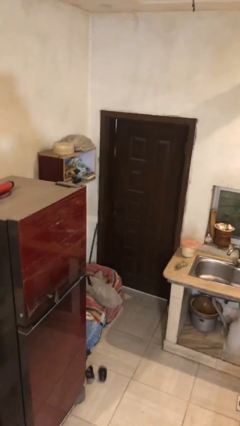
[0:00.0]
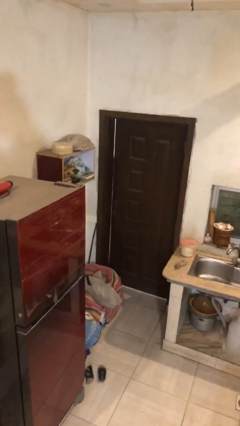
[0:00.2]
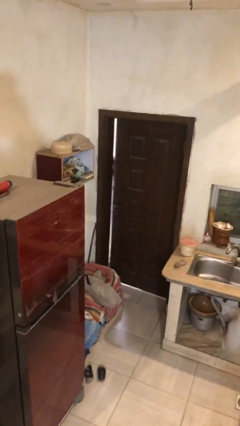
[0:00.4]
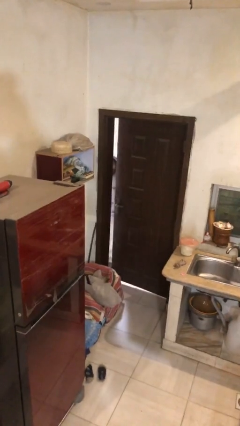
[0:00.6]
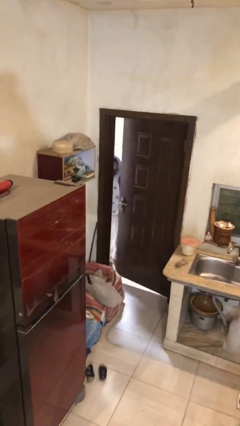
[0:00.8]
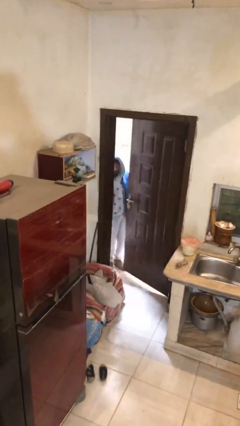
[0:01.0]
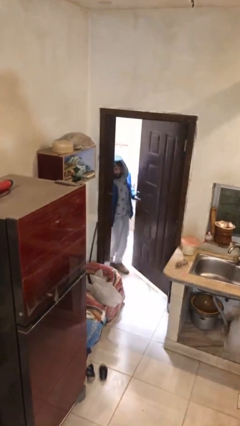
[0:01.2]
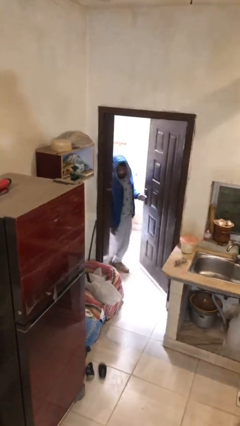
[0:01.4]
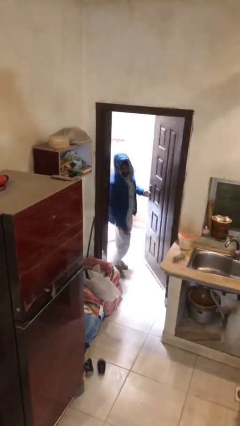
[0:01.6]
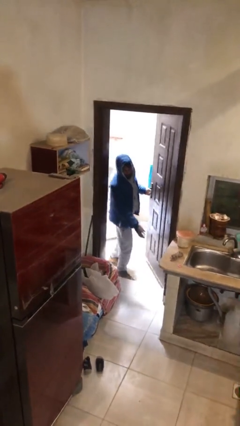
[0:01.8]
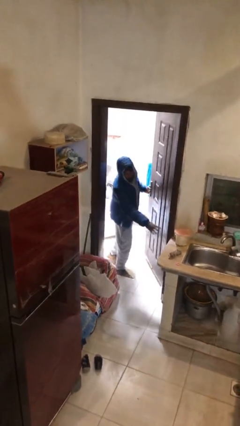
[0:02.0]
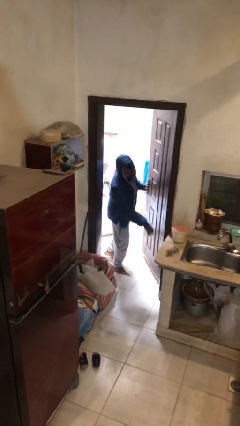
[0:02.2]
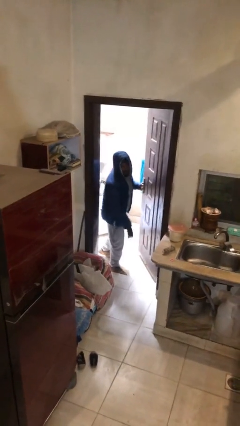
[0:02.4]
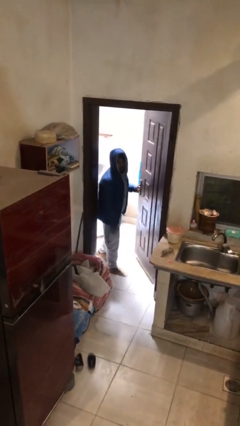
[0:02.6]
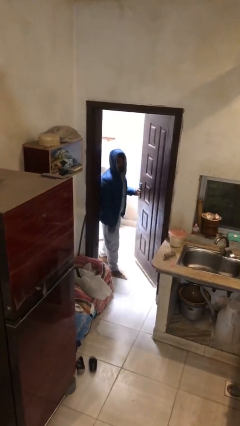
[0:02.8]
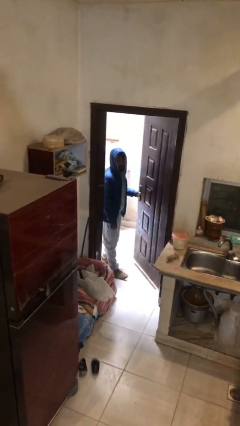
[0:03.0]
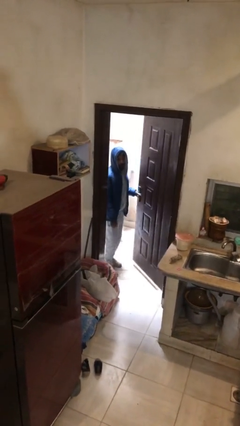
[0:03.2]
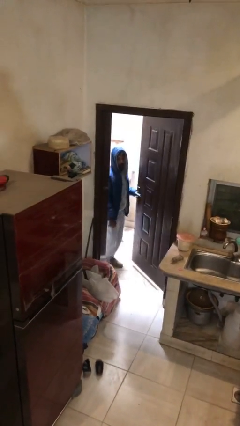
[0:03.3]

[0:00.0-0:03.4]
person opens facility door

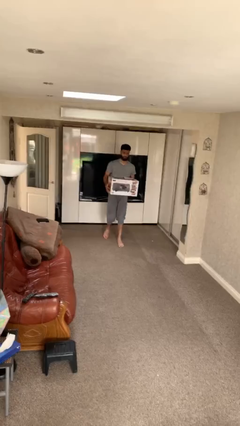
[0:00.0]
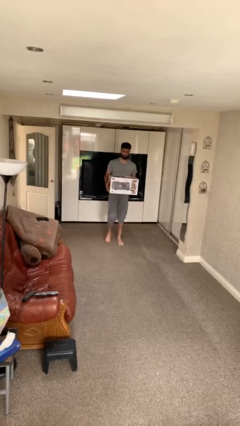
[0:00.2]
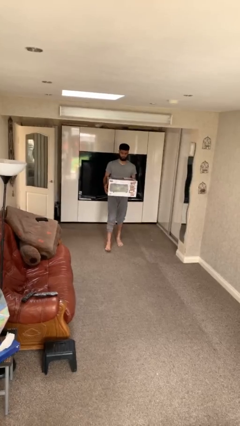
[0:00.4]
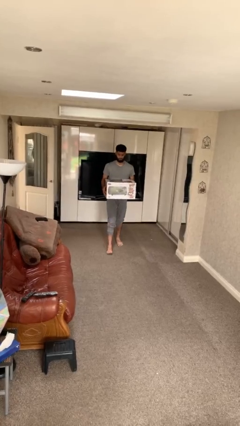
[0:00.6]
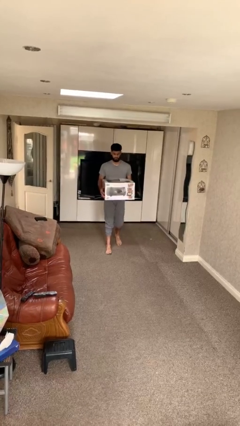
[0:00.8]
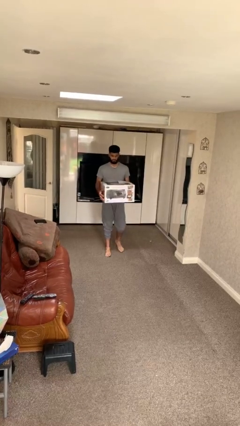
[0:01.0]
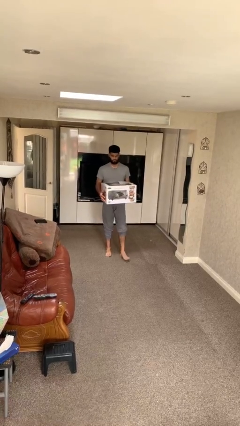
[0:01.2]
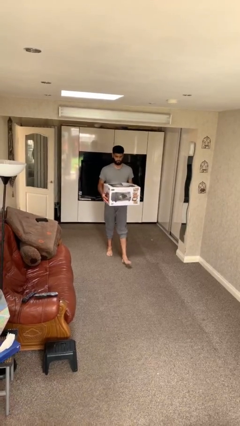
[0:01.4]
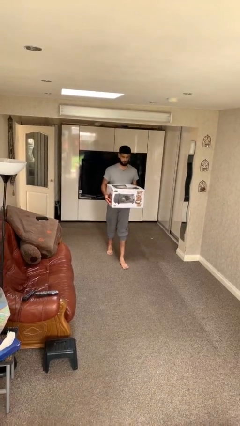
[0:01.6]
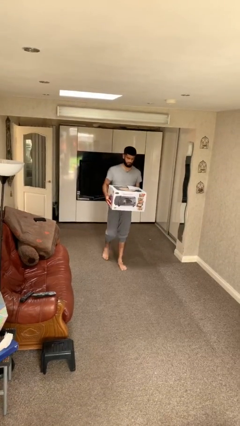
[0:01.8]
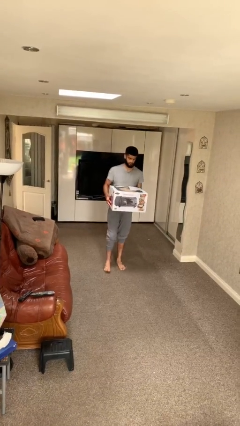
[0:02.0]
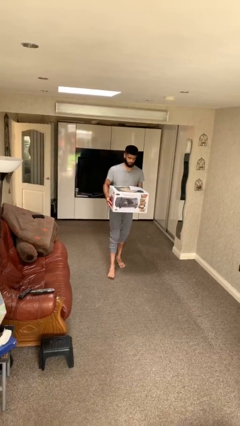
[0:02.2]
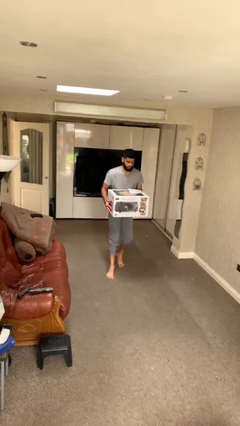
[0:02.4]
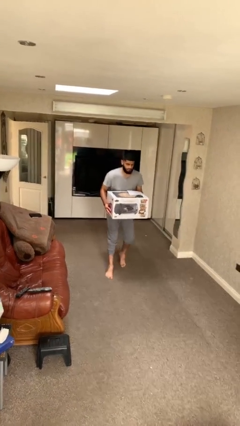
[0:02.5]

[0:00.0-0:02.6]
person carries heavy object

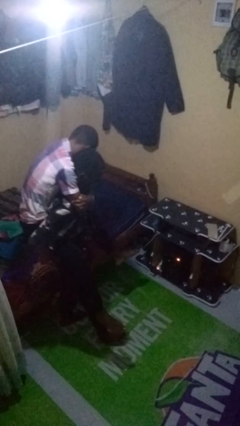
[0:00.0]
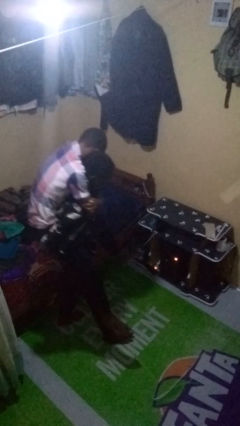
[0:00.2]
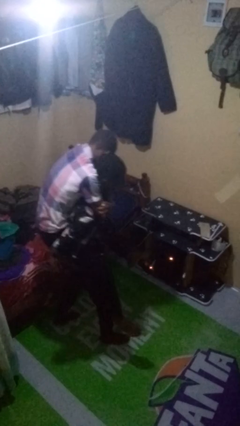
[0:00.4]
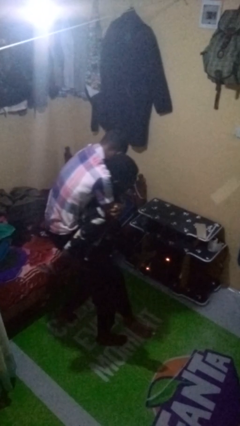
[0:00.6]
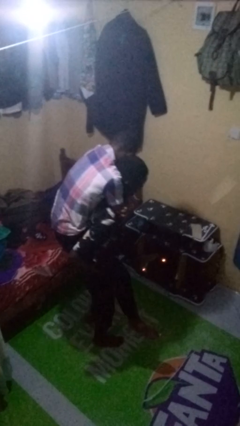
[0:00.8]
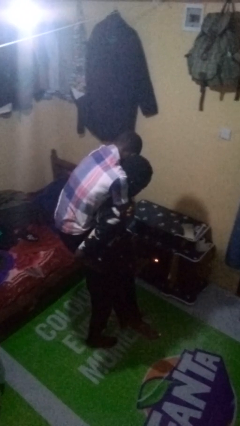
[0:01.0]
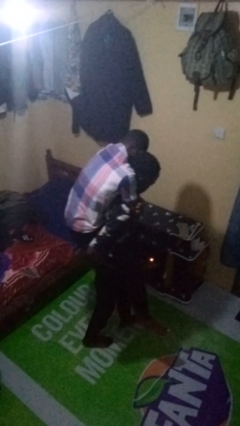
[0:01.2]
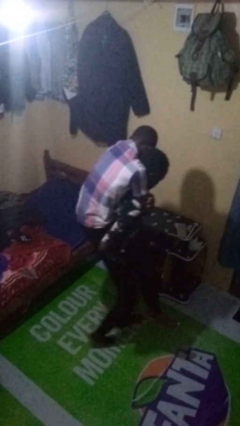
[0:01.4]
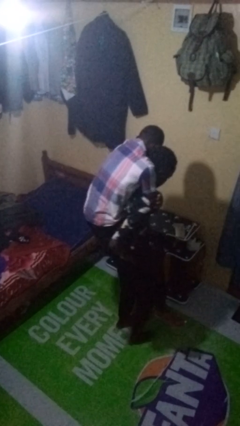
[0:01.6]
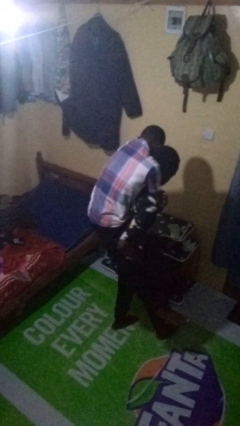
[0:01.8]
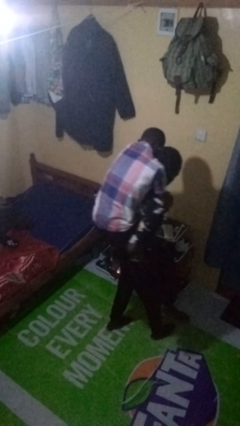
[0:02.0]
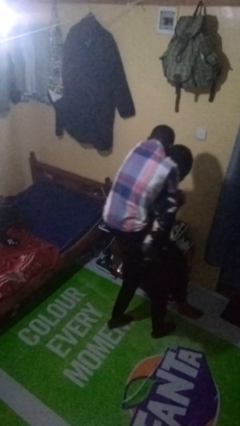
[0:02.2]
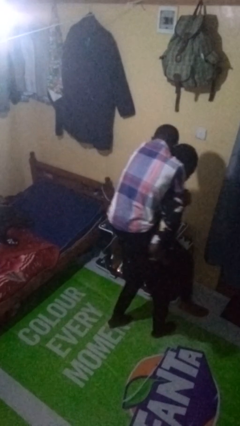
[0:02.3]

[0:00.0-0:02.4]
person carries person on back

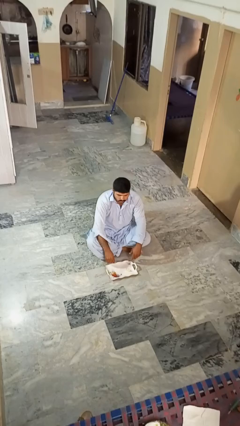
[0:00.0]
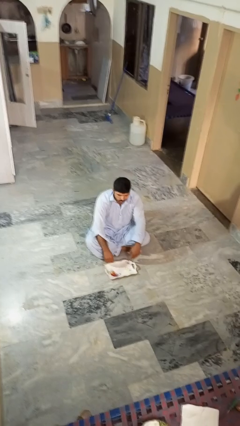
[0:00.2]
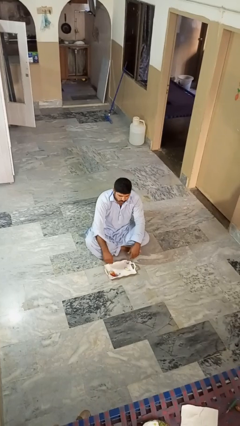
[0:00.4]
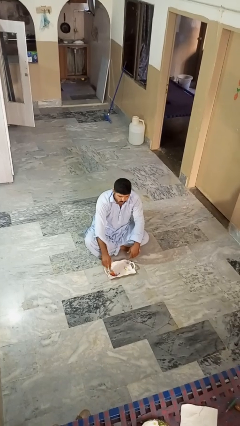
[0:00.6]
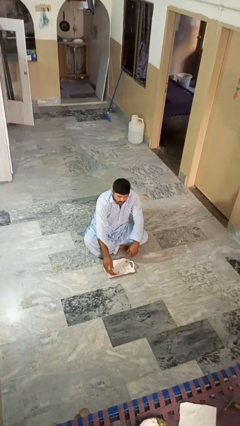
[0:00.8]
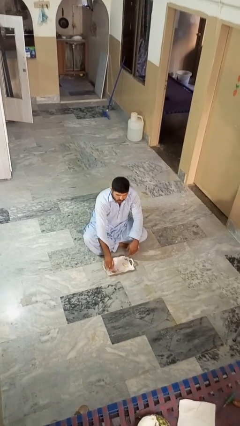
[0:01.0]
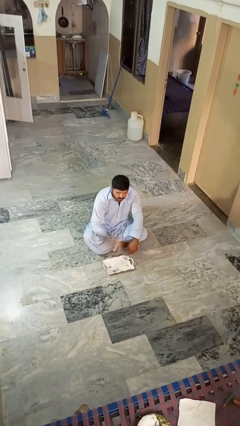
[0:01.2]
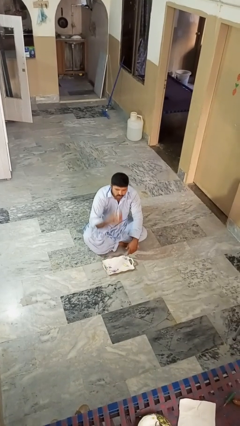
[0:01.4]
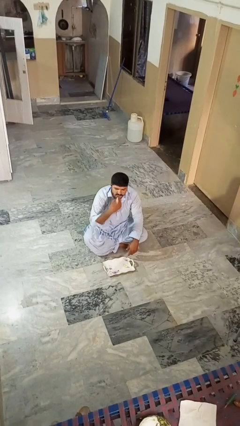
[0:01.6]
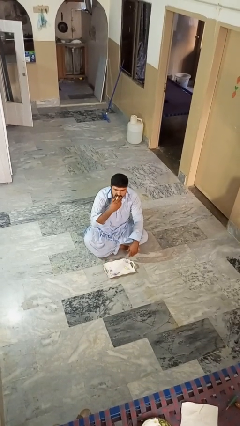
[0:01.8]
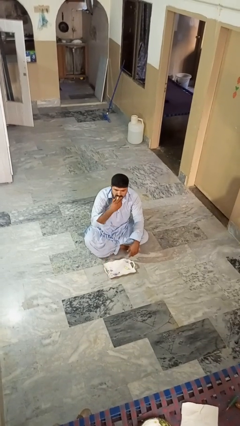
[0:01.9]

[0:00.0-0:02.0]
person eats apple

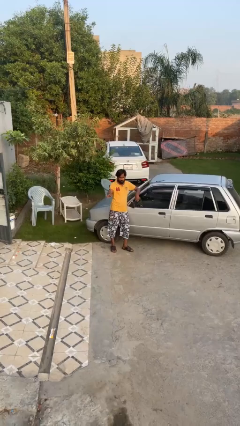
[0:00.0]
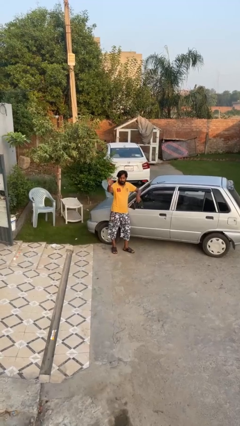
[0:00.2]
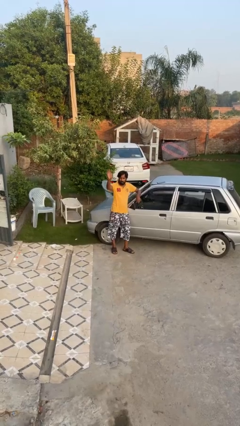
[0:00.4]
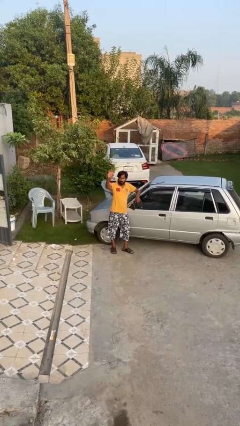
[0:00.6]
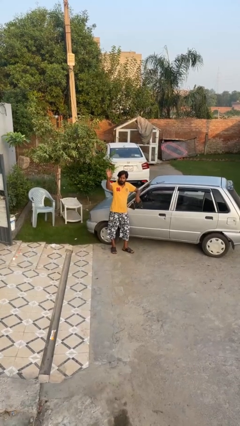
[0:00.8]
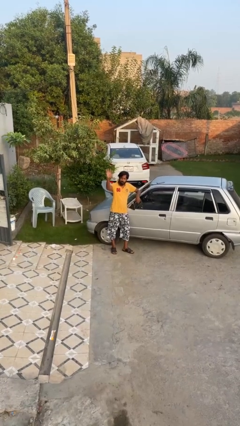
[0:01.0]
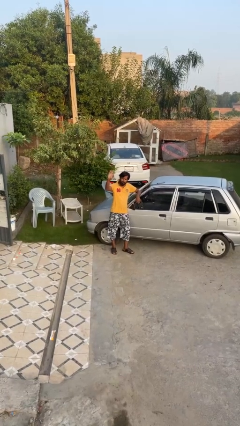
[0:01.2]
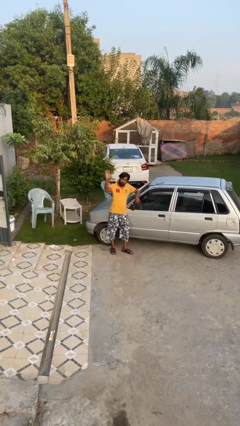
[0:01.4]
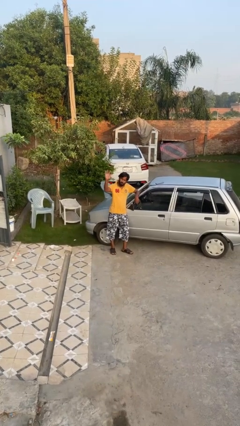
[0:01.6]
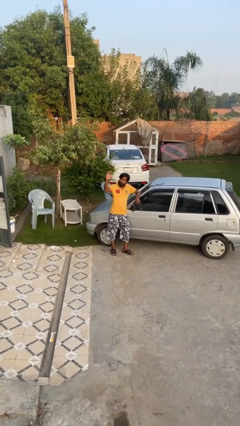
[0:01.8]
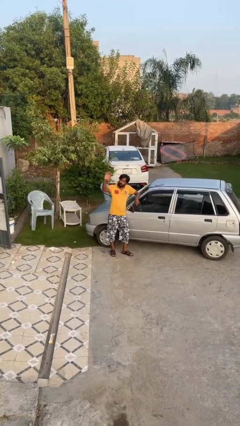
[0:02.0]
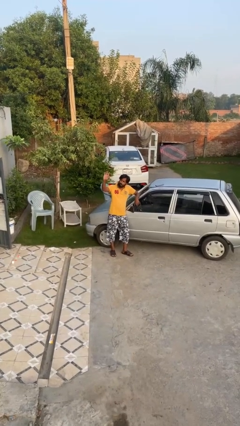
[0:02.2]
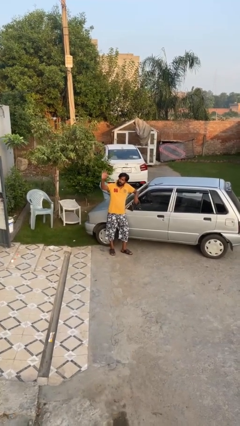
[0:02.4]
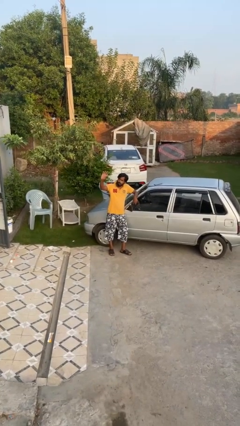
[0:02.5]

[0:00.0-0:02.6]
person waves at person

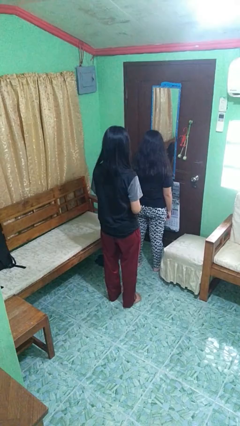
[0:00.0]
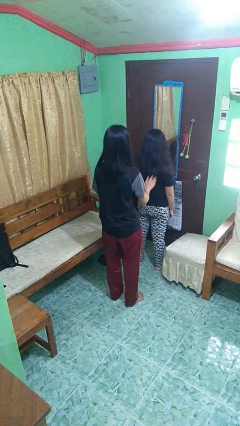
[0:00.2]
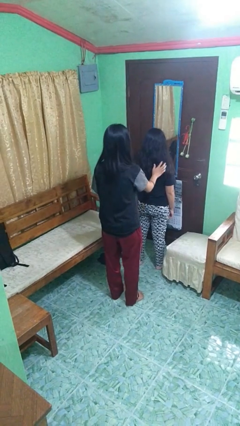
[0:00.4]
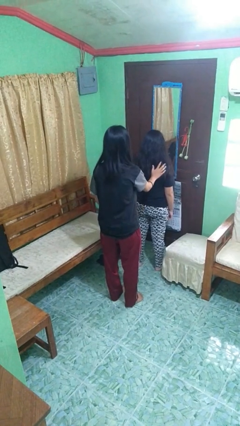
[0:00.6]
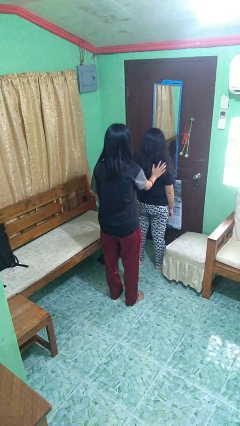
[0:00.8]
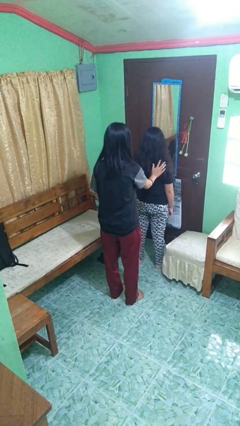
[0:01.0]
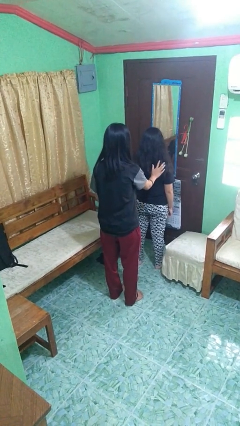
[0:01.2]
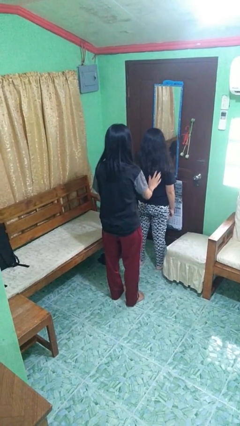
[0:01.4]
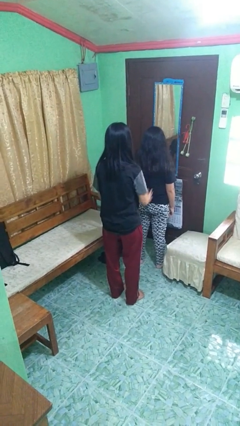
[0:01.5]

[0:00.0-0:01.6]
person touches back of person

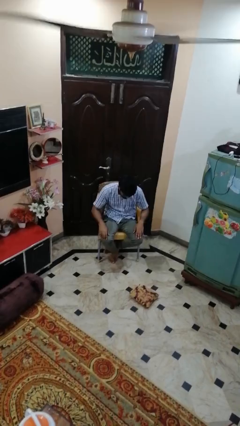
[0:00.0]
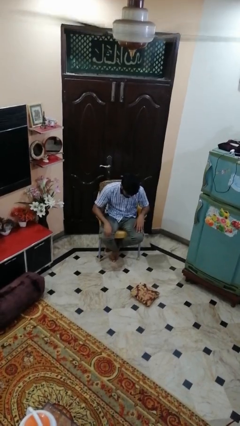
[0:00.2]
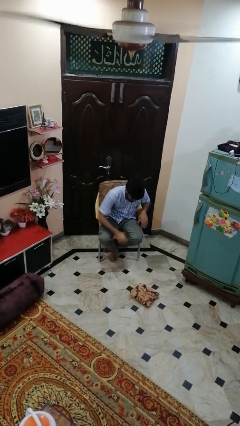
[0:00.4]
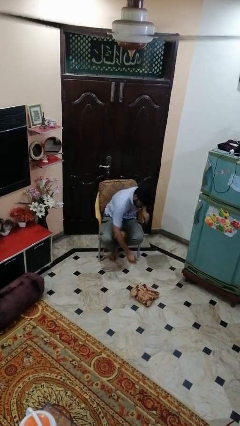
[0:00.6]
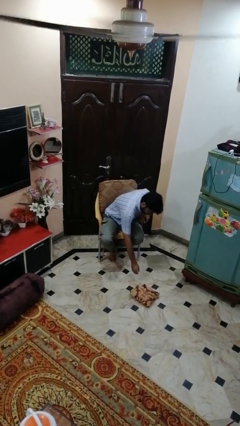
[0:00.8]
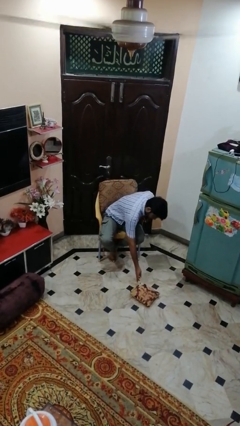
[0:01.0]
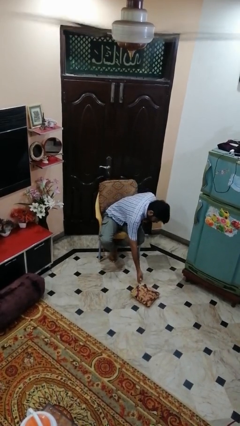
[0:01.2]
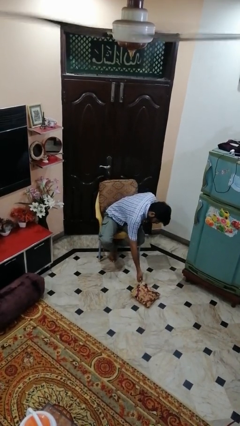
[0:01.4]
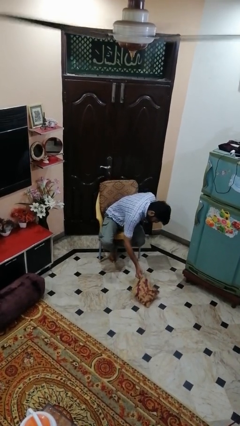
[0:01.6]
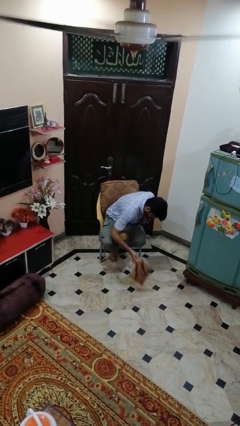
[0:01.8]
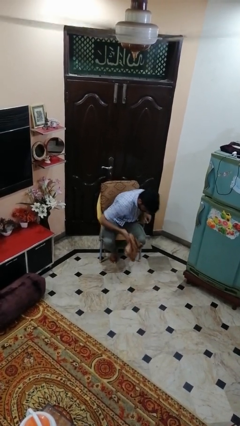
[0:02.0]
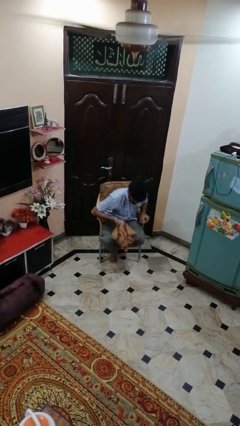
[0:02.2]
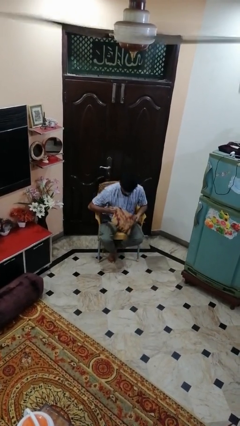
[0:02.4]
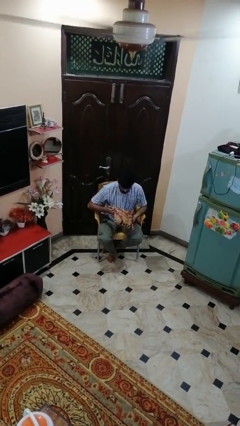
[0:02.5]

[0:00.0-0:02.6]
person picks up object from floor
